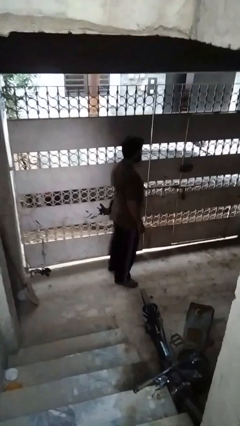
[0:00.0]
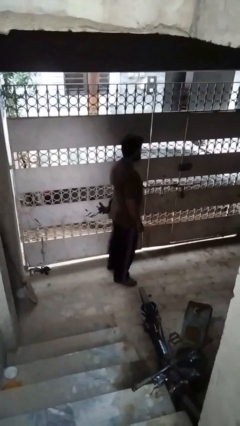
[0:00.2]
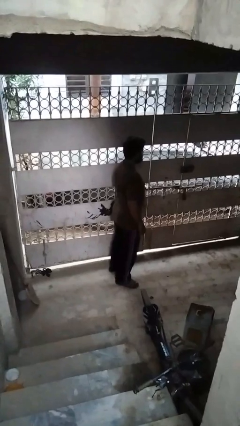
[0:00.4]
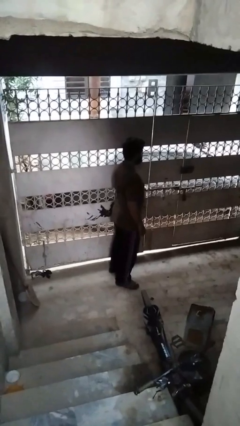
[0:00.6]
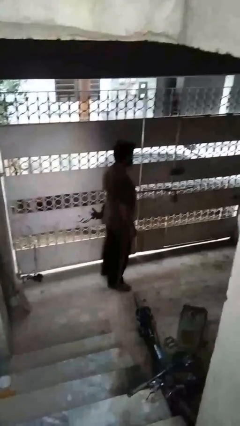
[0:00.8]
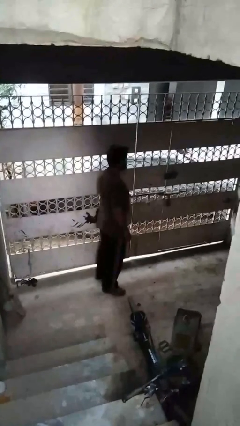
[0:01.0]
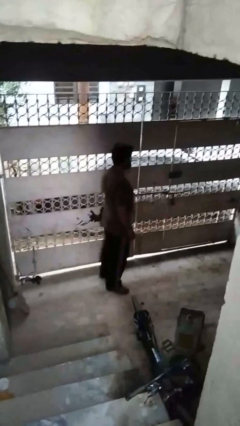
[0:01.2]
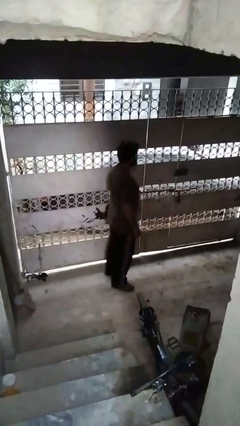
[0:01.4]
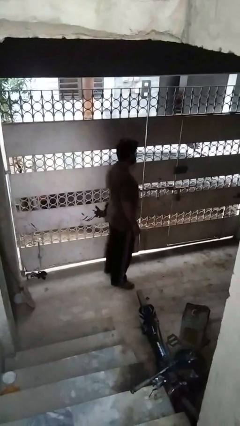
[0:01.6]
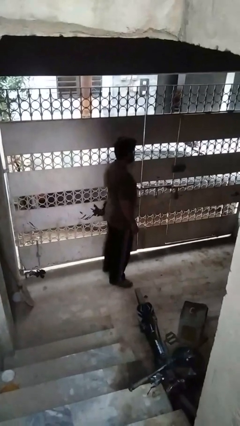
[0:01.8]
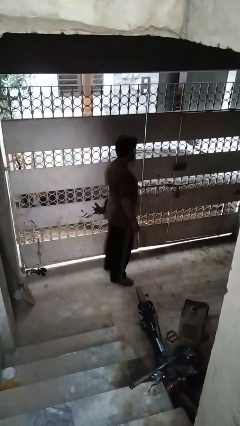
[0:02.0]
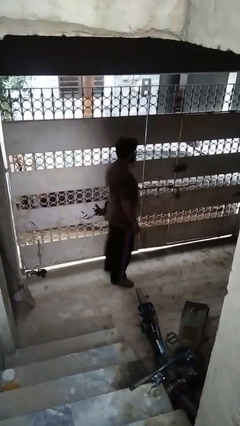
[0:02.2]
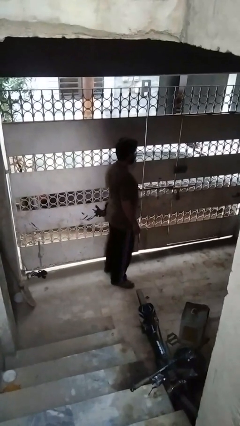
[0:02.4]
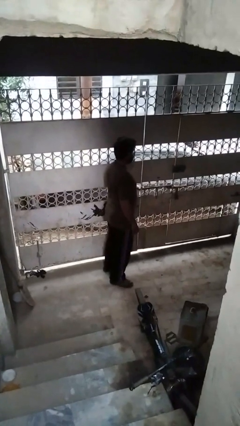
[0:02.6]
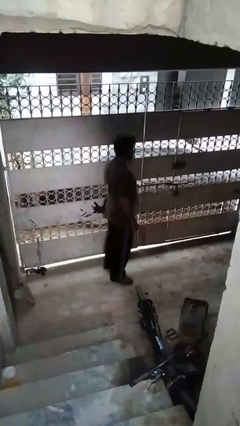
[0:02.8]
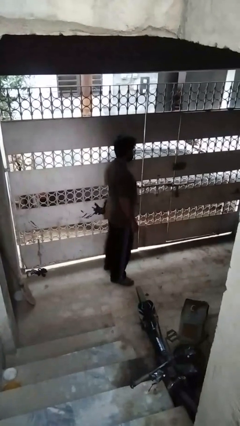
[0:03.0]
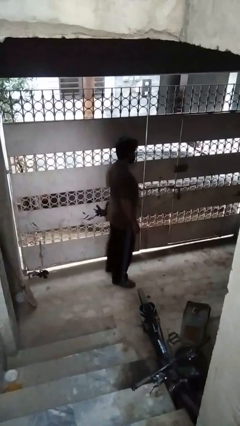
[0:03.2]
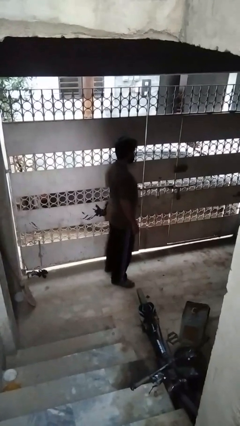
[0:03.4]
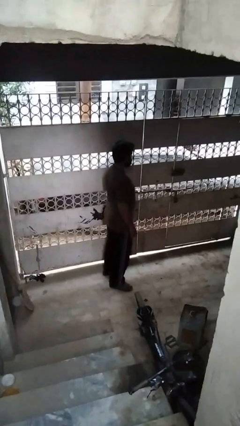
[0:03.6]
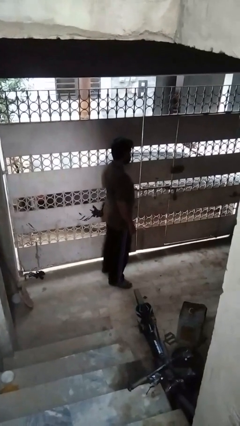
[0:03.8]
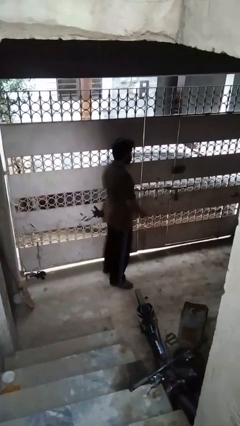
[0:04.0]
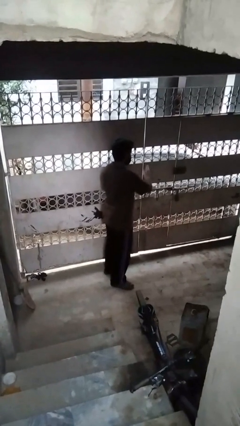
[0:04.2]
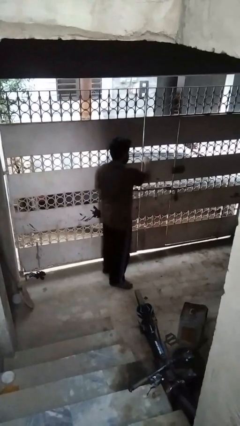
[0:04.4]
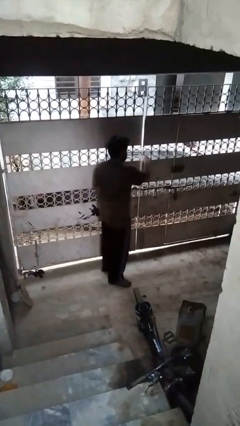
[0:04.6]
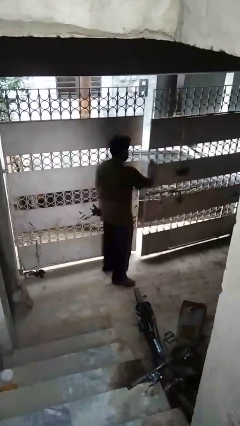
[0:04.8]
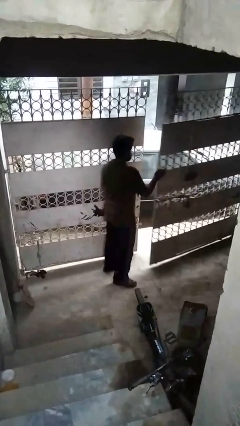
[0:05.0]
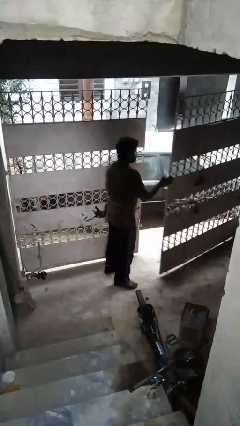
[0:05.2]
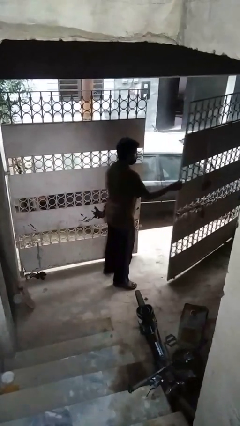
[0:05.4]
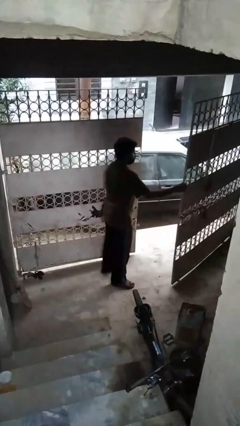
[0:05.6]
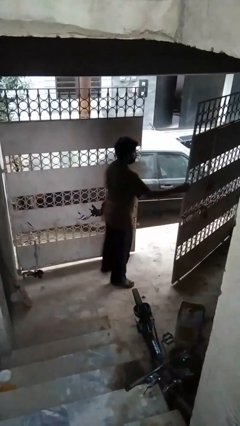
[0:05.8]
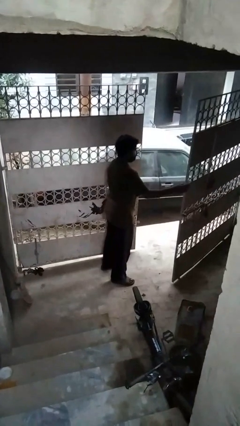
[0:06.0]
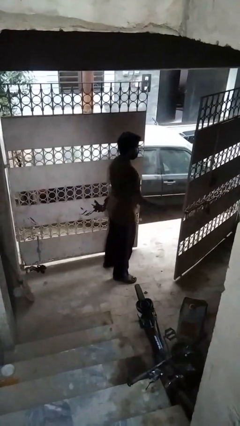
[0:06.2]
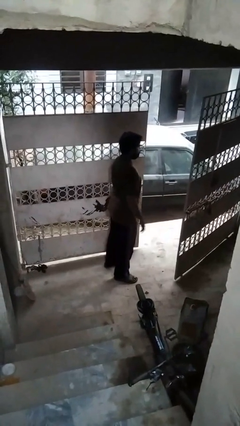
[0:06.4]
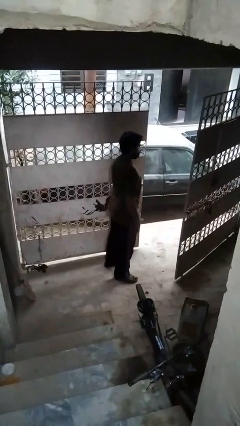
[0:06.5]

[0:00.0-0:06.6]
person opens gate

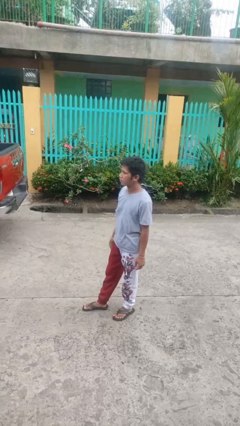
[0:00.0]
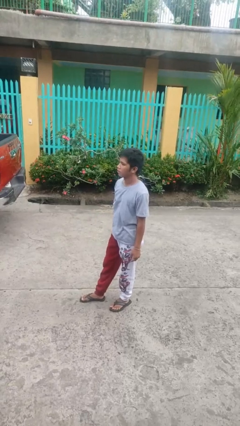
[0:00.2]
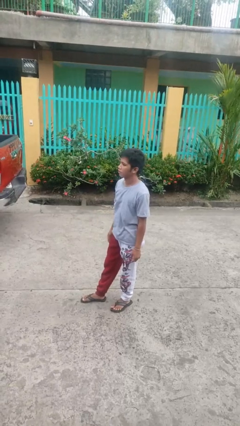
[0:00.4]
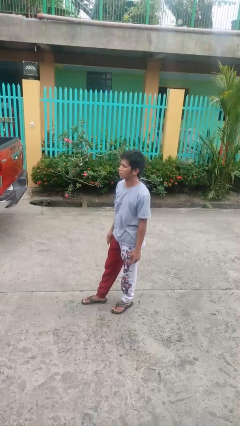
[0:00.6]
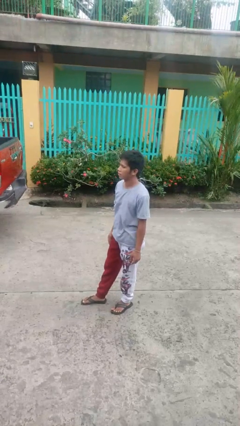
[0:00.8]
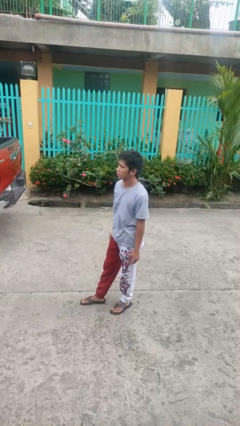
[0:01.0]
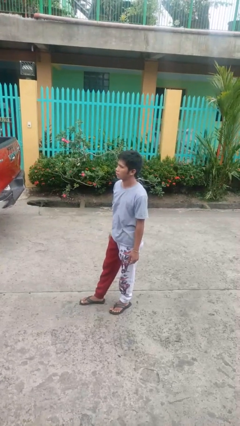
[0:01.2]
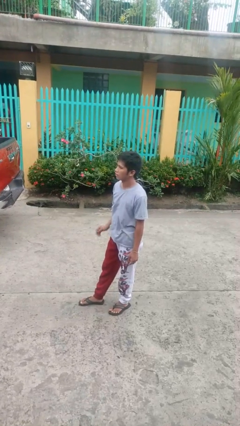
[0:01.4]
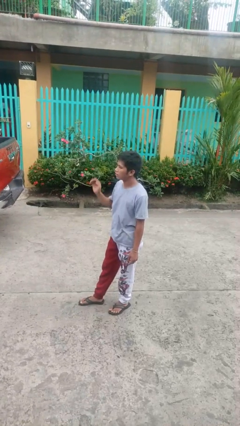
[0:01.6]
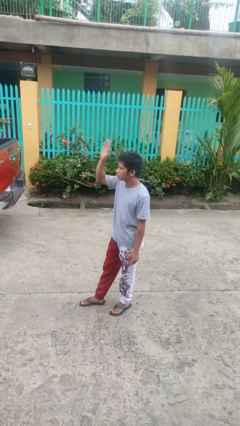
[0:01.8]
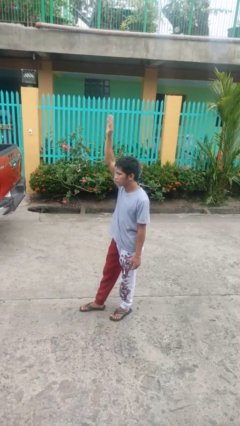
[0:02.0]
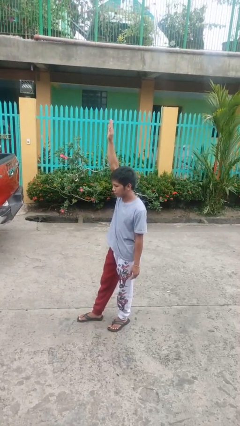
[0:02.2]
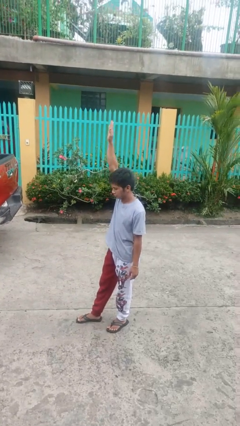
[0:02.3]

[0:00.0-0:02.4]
person gestures lower hand

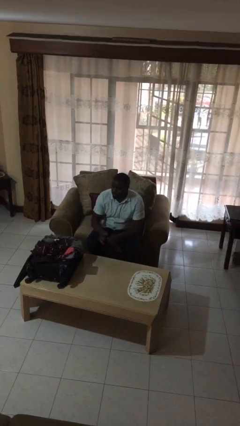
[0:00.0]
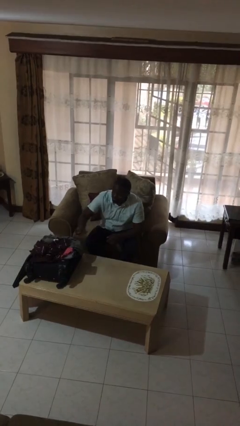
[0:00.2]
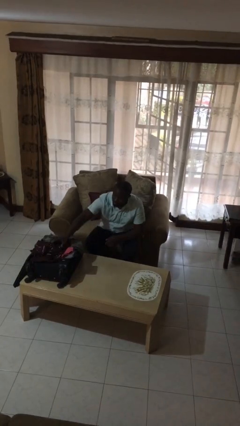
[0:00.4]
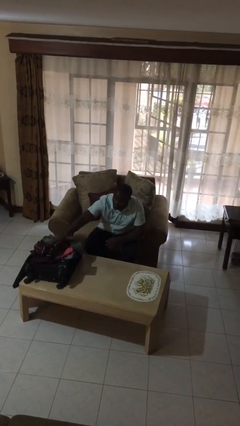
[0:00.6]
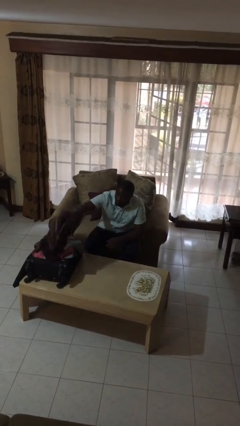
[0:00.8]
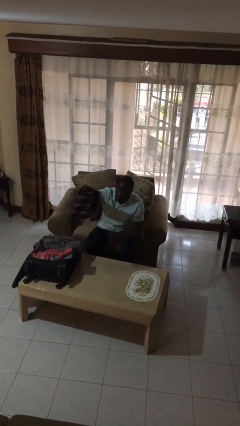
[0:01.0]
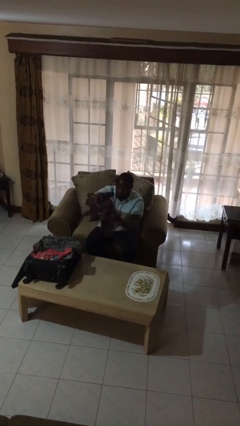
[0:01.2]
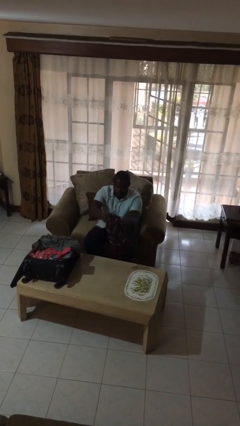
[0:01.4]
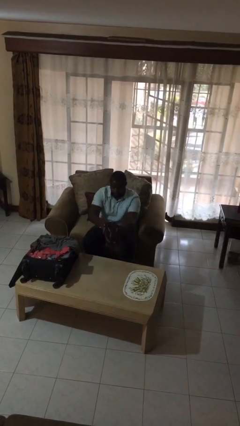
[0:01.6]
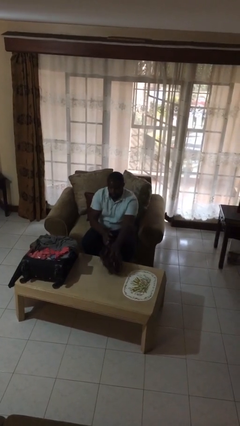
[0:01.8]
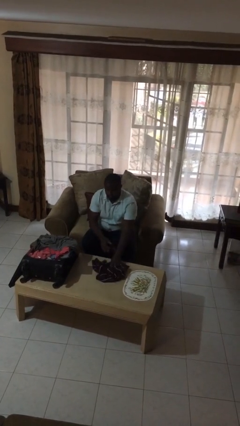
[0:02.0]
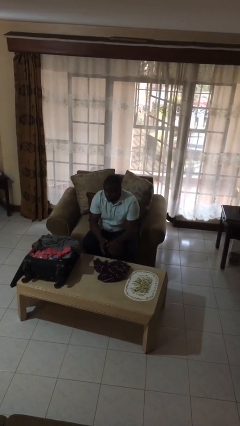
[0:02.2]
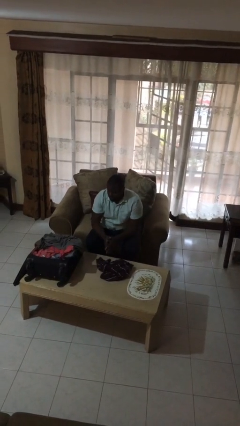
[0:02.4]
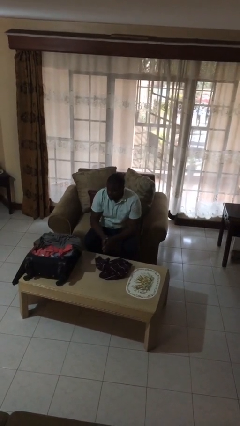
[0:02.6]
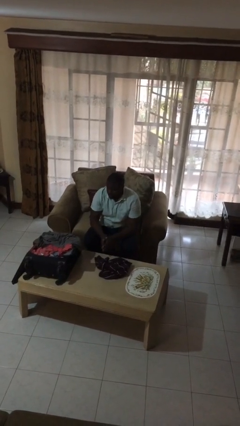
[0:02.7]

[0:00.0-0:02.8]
person unloads clothes from suitcase

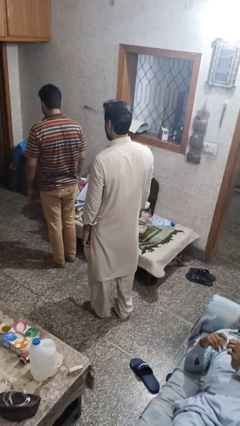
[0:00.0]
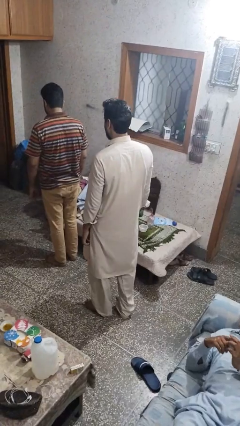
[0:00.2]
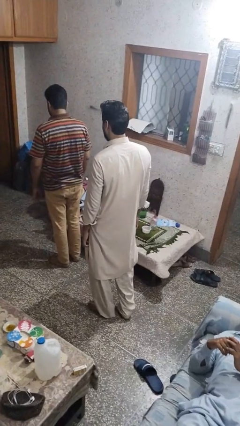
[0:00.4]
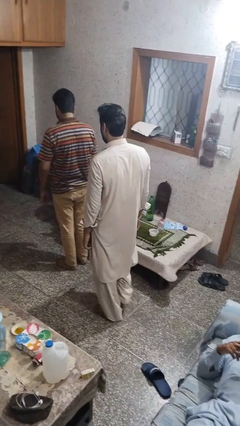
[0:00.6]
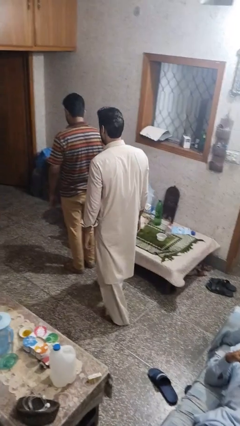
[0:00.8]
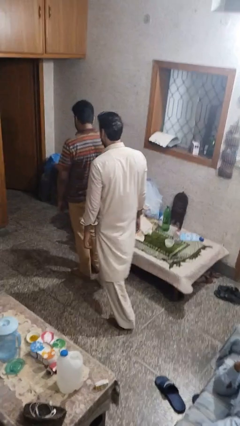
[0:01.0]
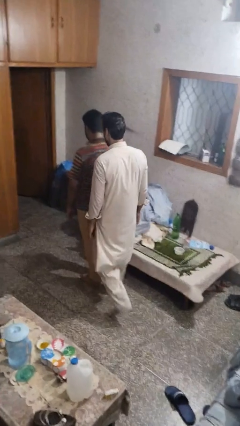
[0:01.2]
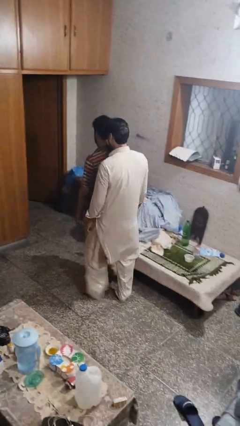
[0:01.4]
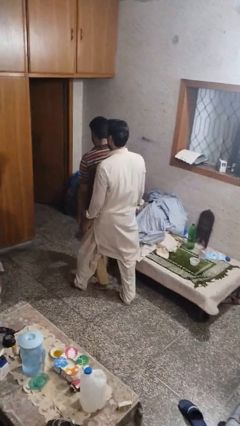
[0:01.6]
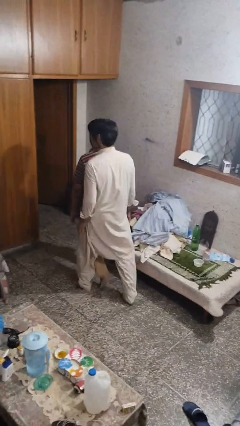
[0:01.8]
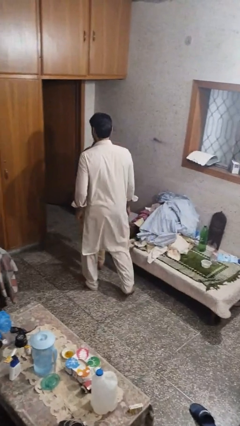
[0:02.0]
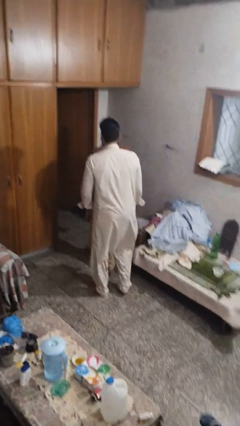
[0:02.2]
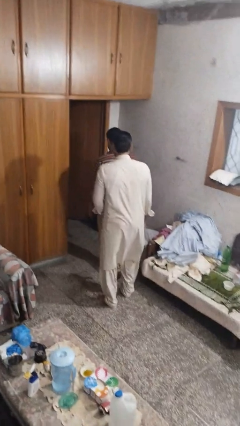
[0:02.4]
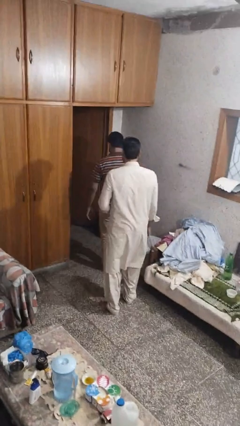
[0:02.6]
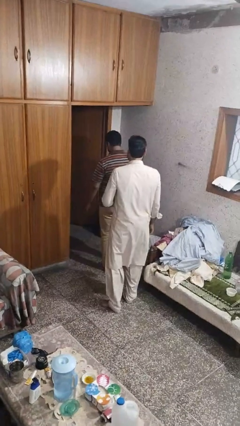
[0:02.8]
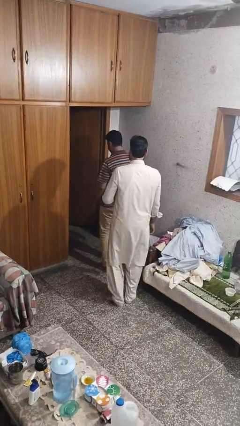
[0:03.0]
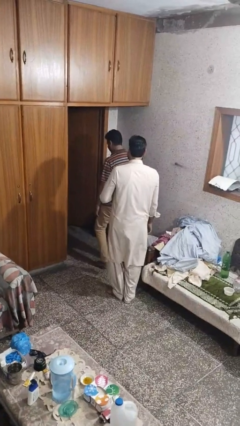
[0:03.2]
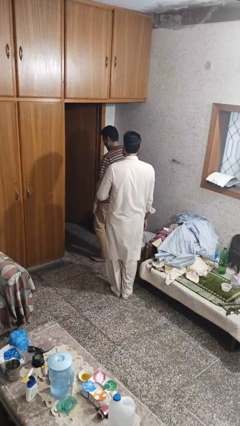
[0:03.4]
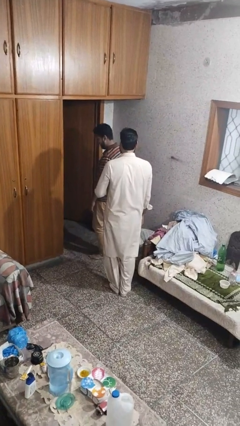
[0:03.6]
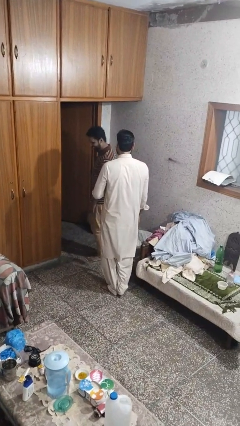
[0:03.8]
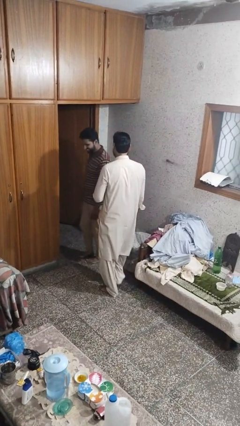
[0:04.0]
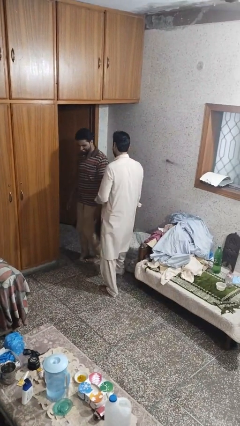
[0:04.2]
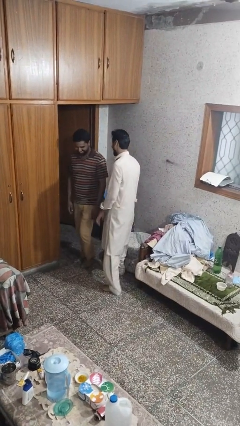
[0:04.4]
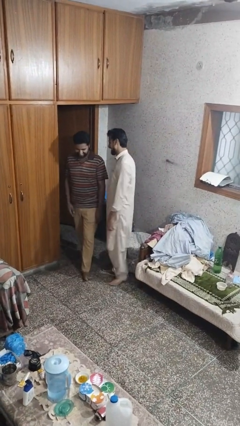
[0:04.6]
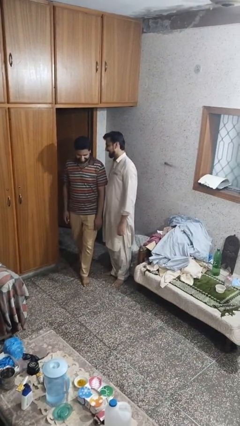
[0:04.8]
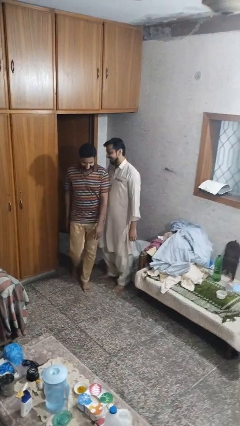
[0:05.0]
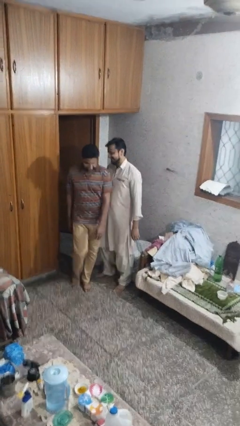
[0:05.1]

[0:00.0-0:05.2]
person bumps into person

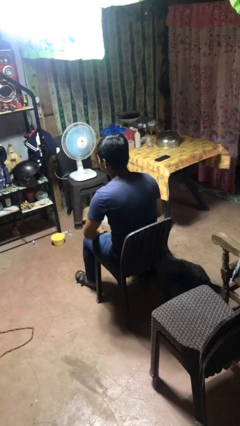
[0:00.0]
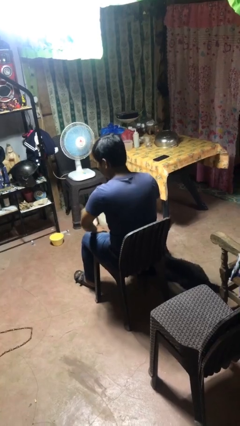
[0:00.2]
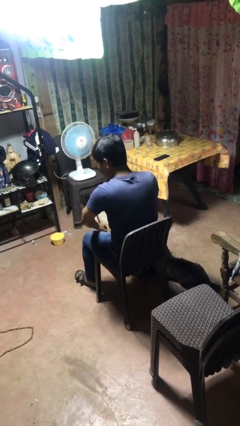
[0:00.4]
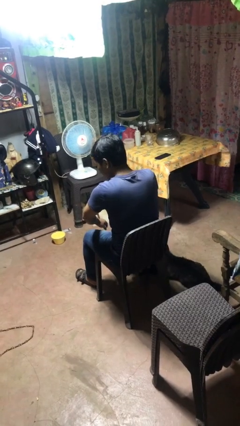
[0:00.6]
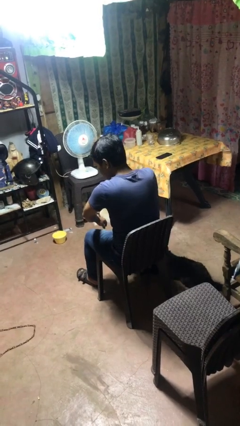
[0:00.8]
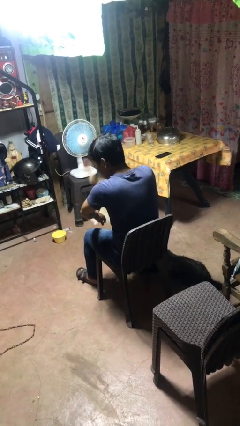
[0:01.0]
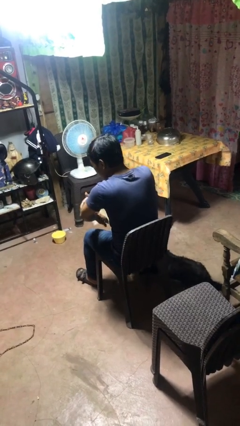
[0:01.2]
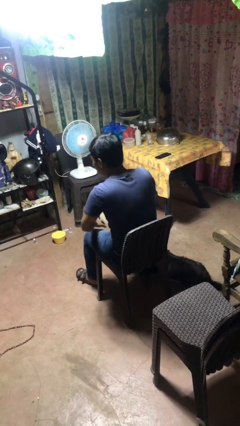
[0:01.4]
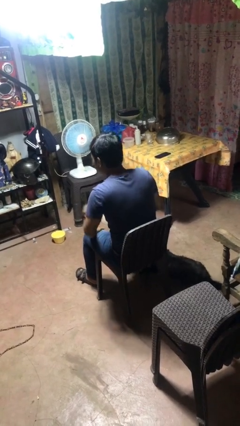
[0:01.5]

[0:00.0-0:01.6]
person swats bug
